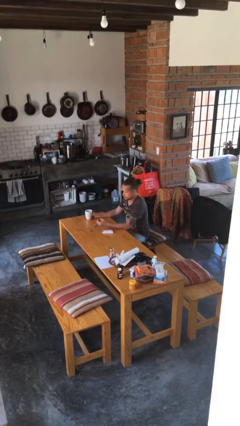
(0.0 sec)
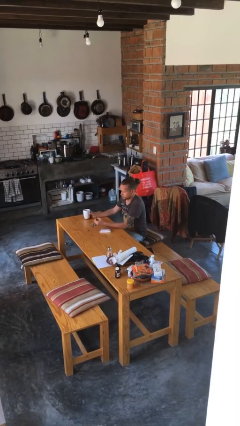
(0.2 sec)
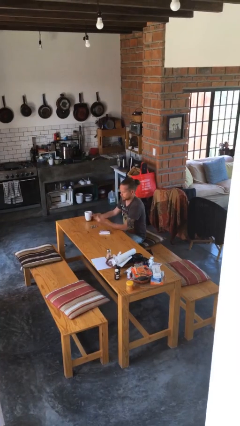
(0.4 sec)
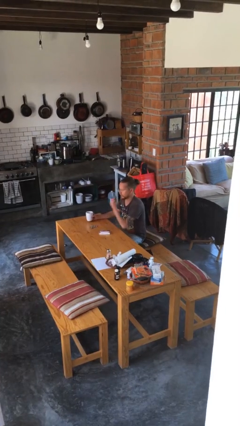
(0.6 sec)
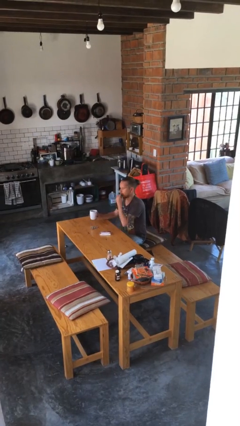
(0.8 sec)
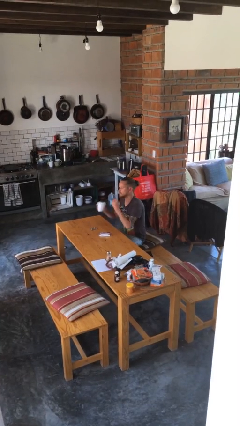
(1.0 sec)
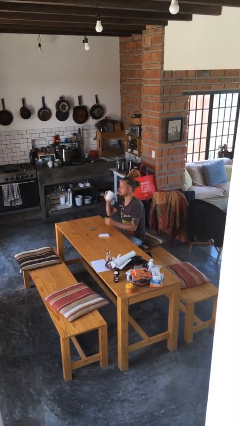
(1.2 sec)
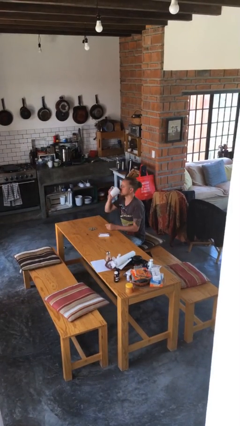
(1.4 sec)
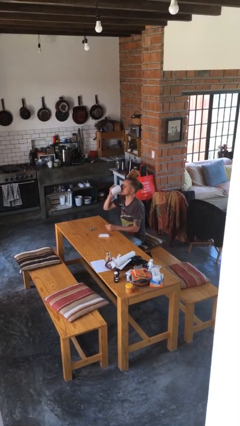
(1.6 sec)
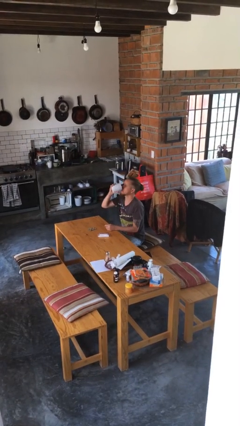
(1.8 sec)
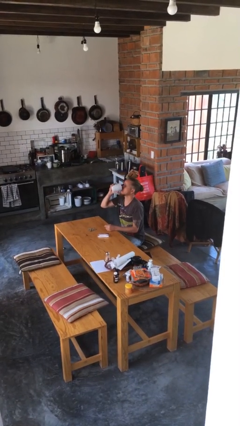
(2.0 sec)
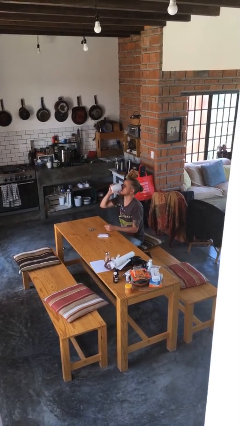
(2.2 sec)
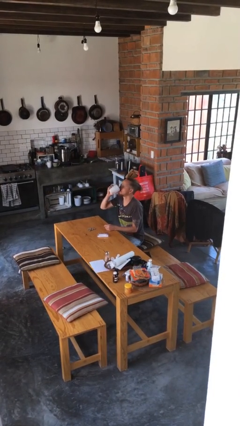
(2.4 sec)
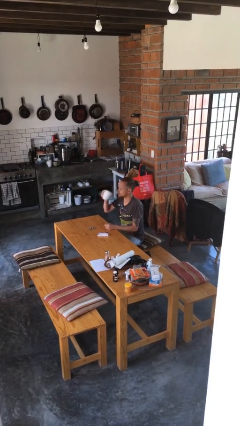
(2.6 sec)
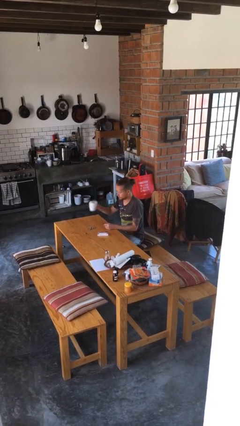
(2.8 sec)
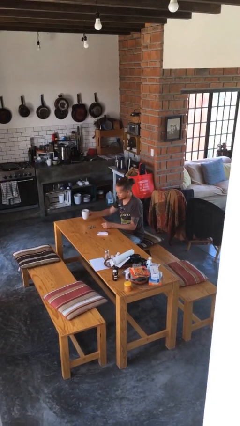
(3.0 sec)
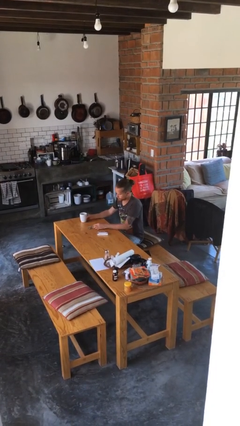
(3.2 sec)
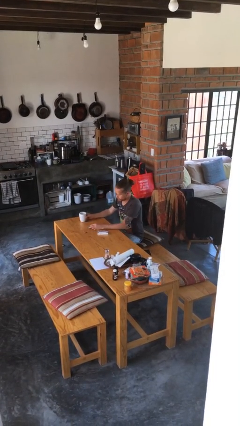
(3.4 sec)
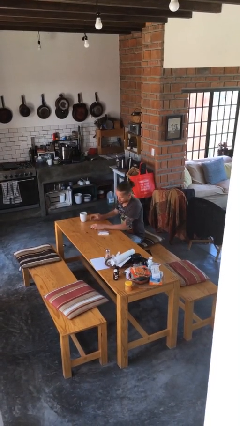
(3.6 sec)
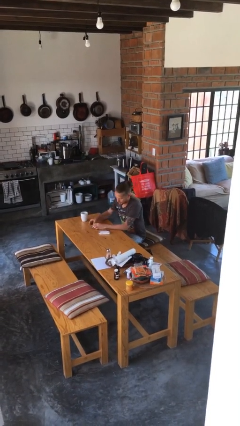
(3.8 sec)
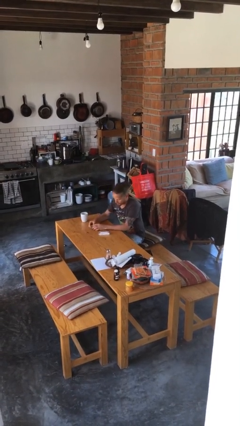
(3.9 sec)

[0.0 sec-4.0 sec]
person drinks from cup

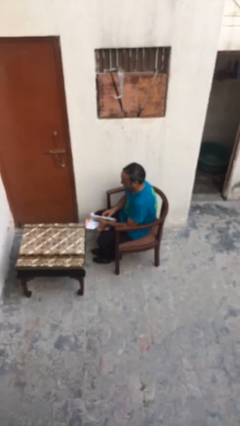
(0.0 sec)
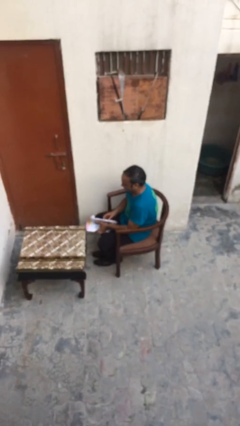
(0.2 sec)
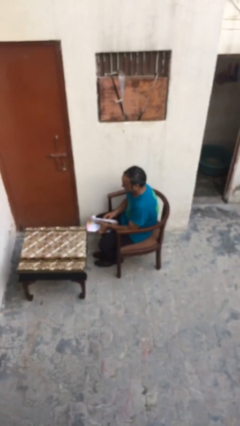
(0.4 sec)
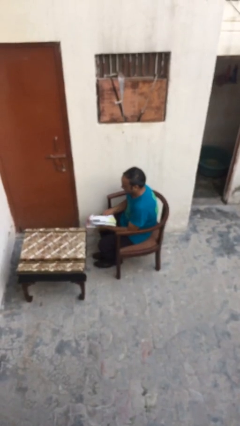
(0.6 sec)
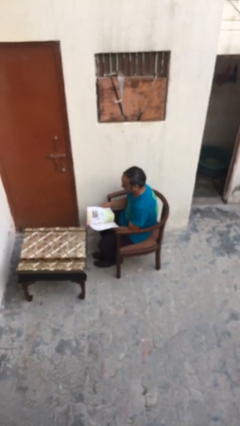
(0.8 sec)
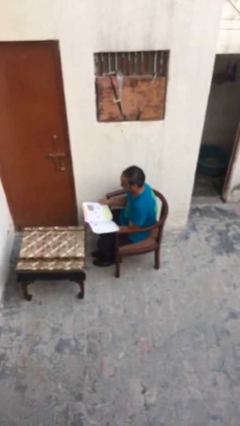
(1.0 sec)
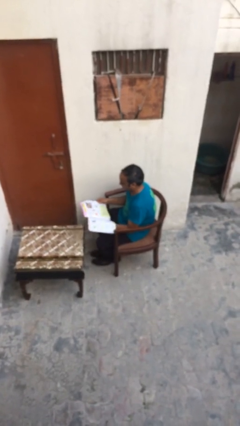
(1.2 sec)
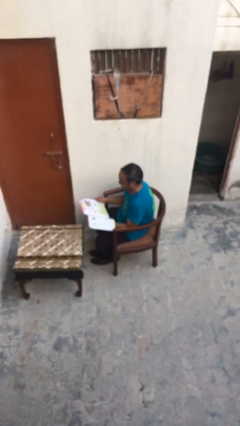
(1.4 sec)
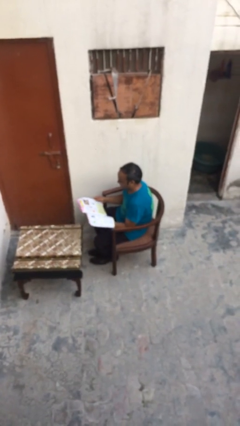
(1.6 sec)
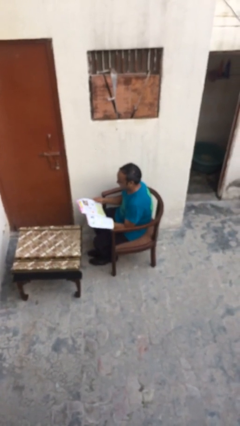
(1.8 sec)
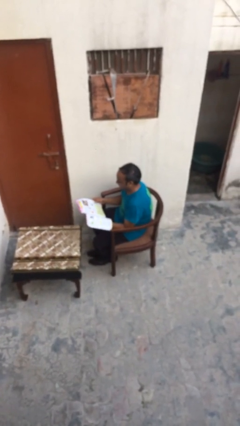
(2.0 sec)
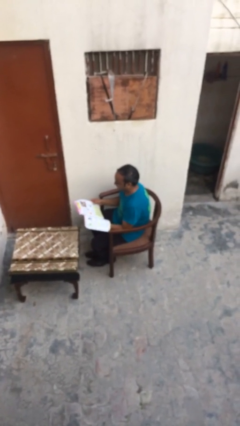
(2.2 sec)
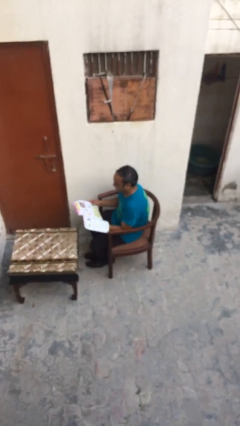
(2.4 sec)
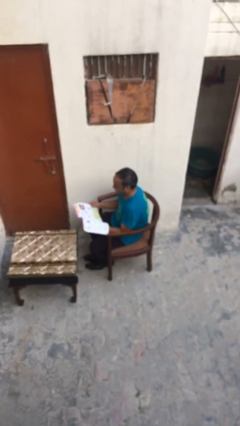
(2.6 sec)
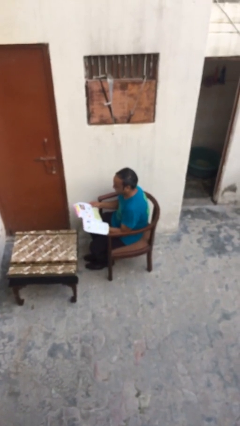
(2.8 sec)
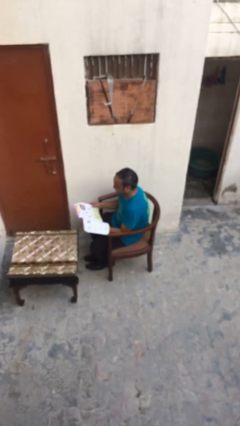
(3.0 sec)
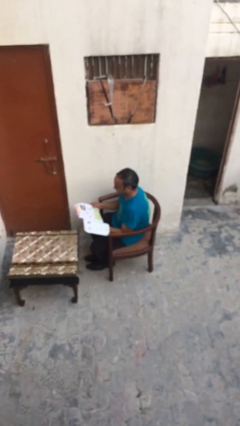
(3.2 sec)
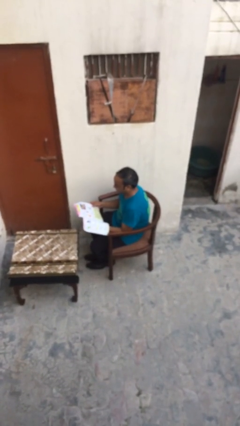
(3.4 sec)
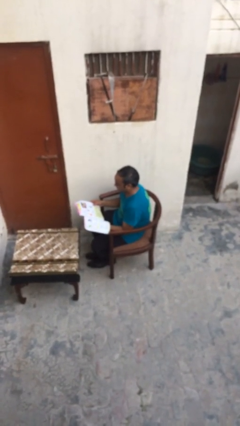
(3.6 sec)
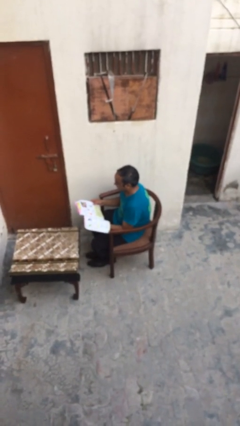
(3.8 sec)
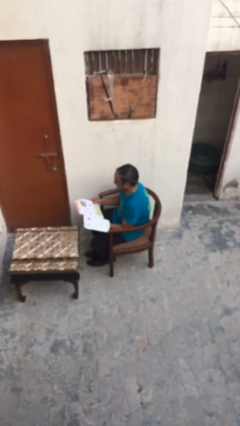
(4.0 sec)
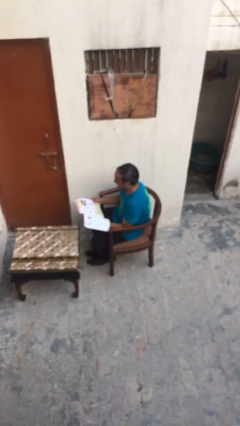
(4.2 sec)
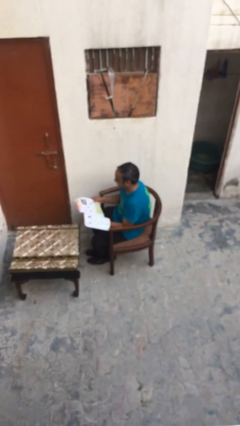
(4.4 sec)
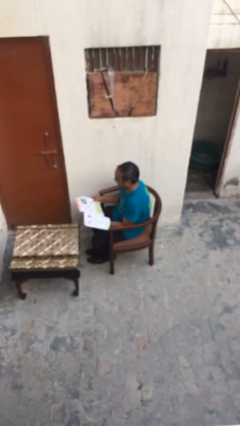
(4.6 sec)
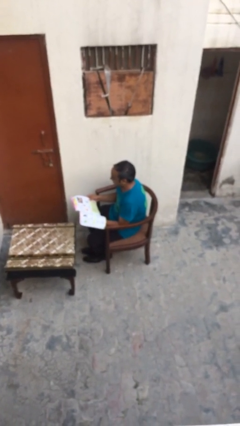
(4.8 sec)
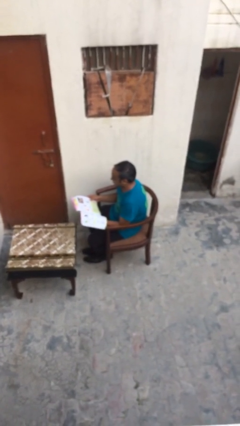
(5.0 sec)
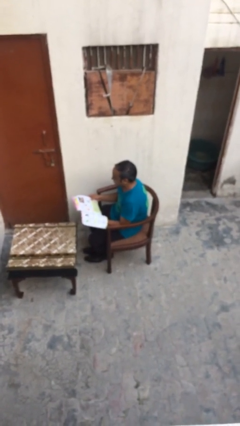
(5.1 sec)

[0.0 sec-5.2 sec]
person reads document

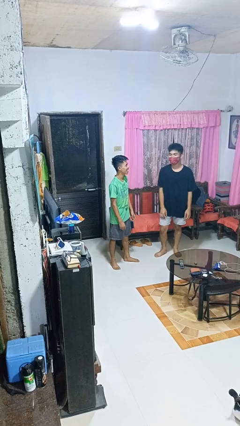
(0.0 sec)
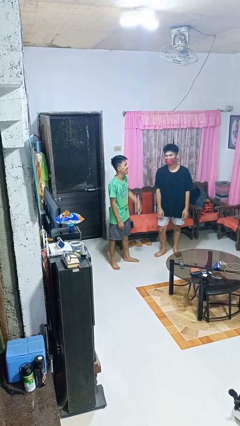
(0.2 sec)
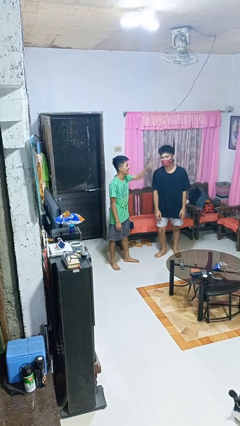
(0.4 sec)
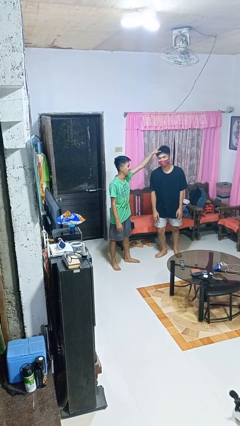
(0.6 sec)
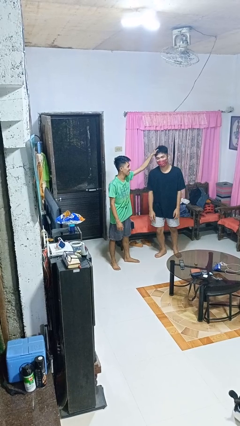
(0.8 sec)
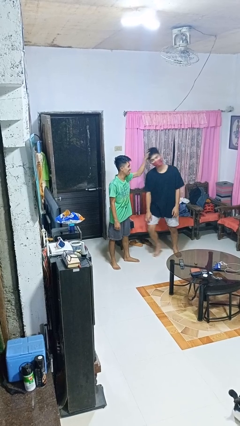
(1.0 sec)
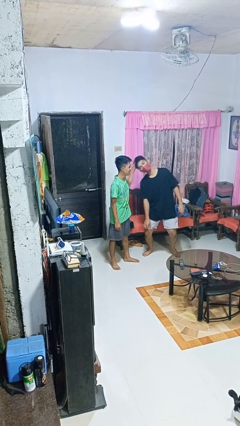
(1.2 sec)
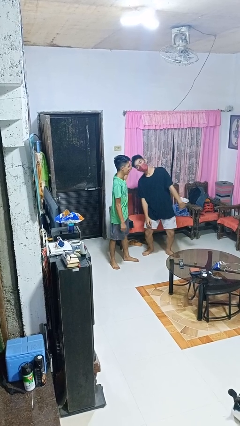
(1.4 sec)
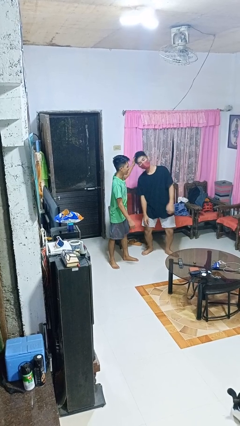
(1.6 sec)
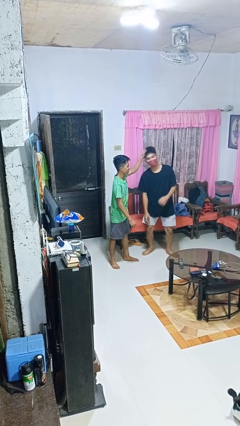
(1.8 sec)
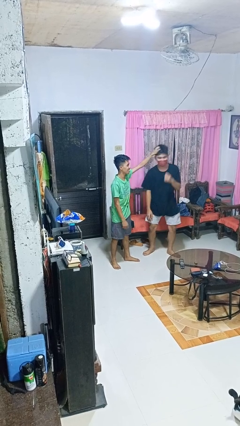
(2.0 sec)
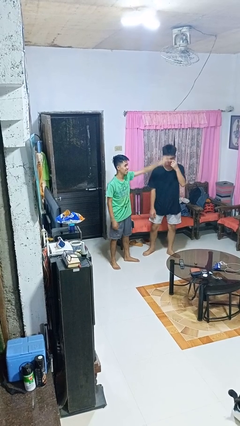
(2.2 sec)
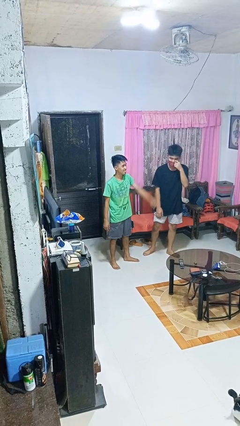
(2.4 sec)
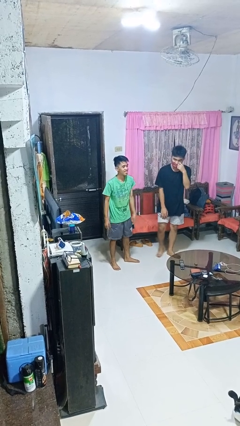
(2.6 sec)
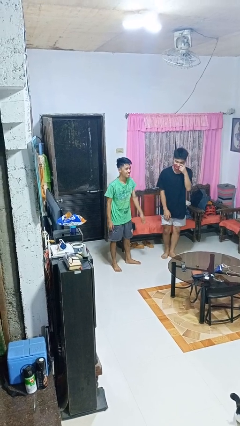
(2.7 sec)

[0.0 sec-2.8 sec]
person grabs person by hair

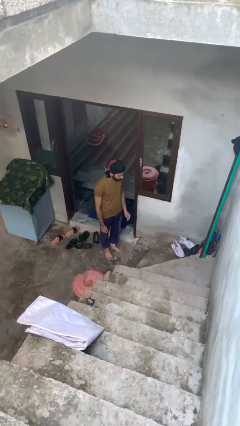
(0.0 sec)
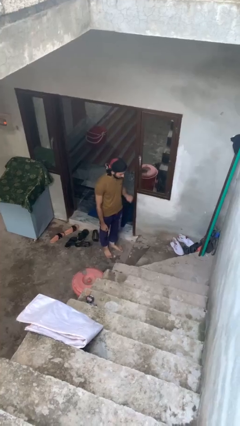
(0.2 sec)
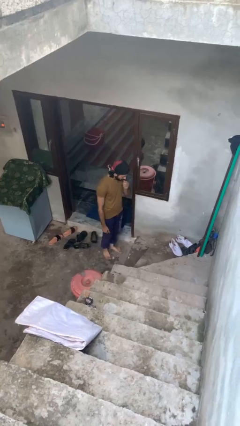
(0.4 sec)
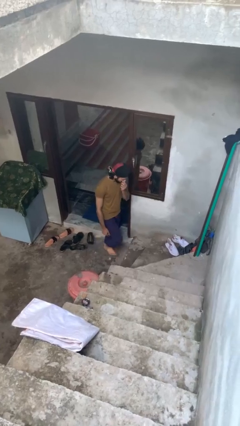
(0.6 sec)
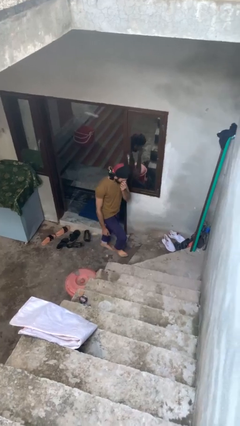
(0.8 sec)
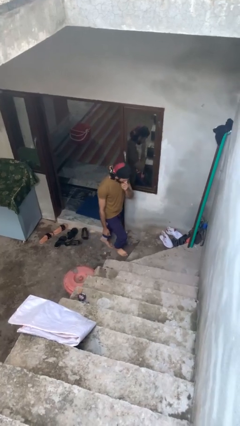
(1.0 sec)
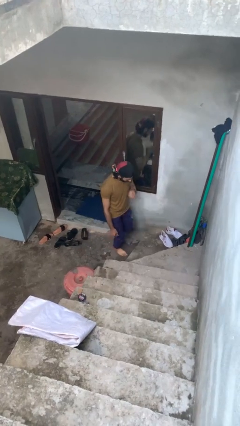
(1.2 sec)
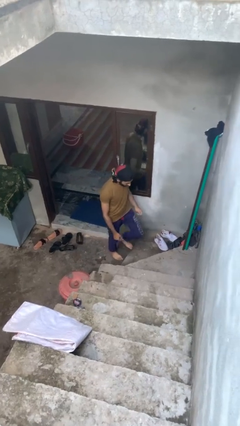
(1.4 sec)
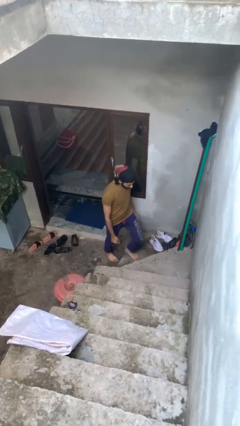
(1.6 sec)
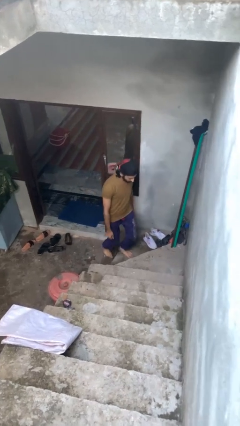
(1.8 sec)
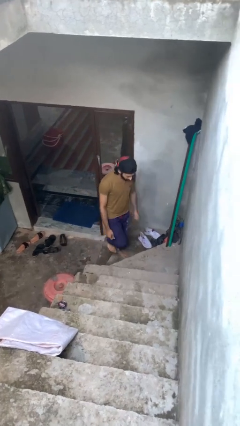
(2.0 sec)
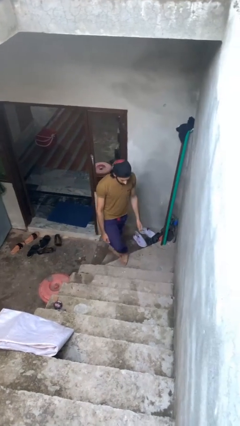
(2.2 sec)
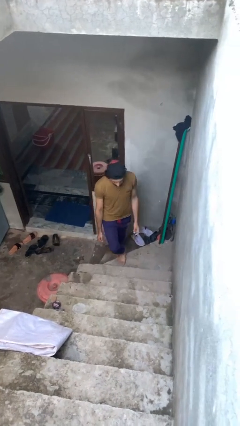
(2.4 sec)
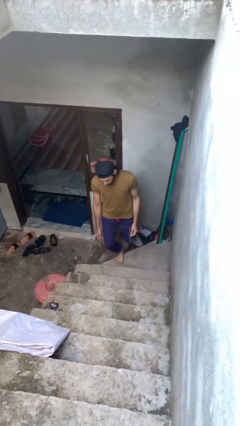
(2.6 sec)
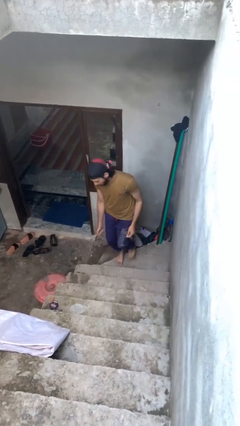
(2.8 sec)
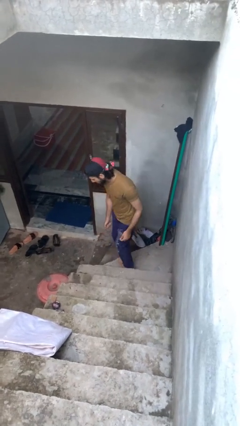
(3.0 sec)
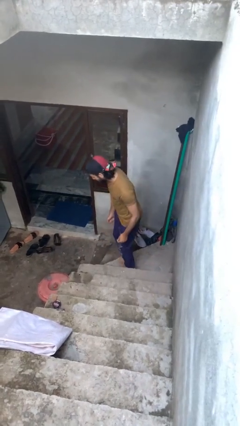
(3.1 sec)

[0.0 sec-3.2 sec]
person climbs up stairs
